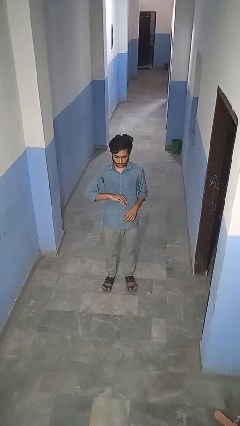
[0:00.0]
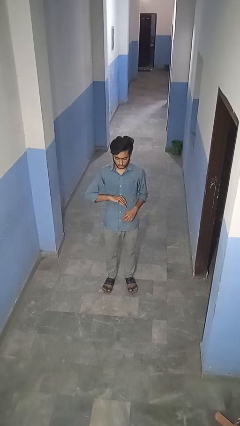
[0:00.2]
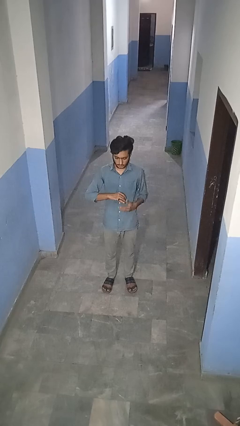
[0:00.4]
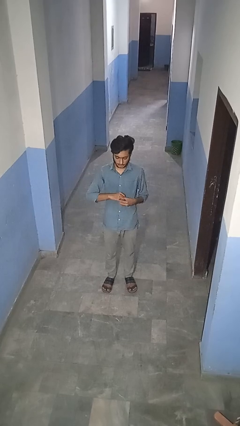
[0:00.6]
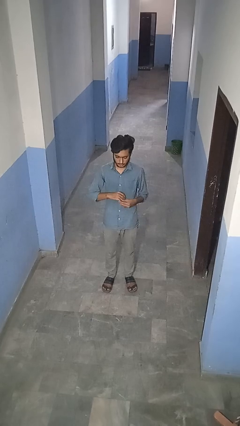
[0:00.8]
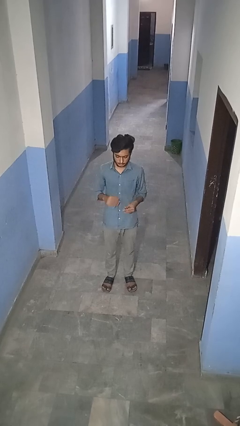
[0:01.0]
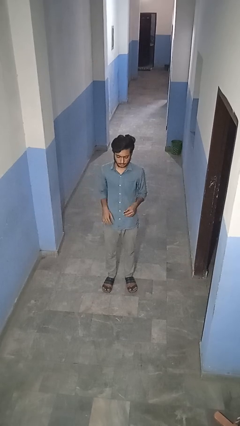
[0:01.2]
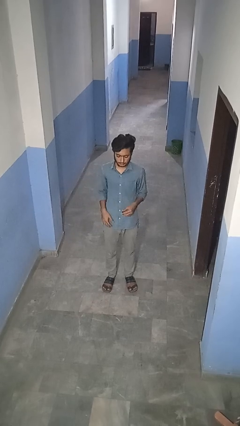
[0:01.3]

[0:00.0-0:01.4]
person takes off ring

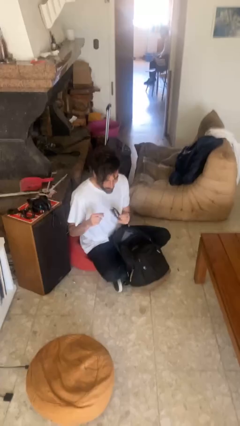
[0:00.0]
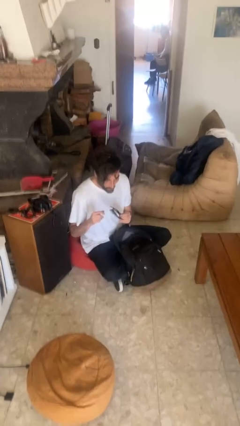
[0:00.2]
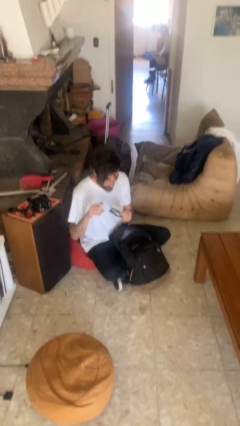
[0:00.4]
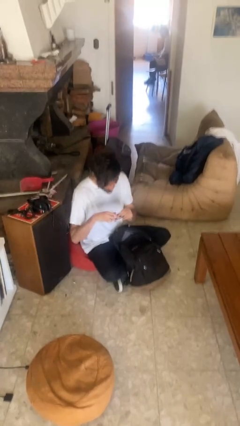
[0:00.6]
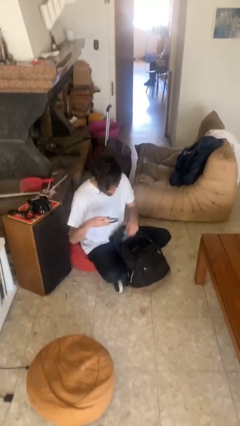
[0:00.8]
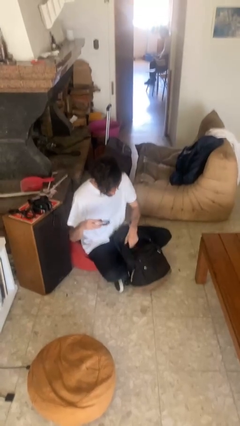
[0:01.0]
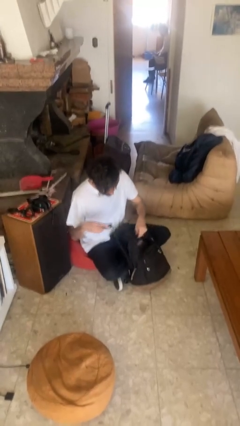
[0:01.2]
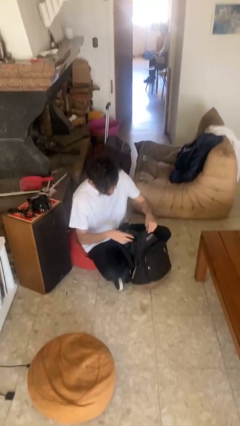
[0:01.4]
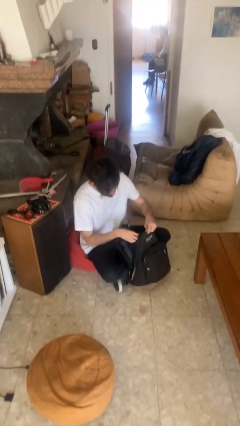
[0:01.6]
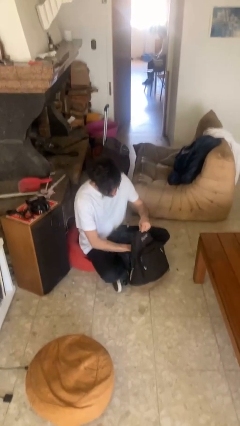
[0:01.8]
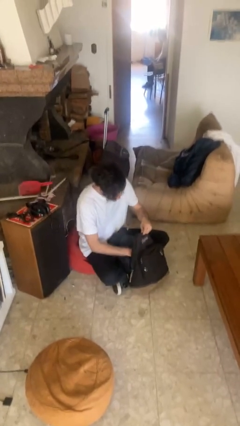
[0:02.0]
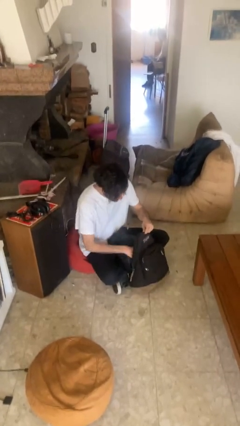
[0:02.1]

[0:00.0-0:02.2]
person puts object into backpack

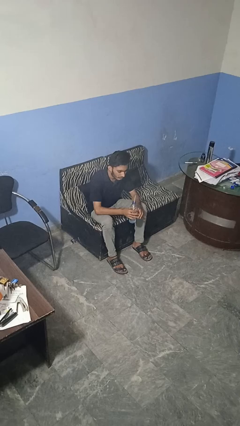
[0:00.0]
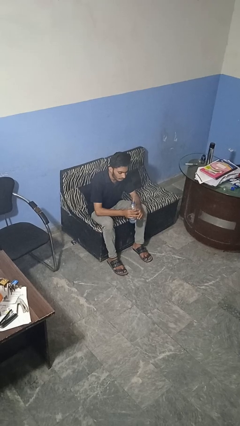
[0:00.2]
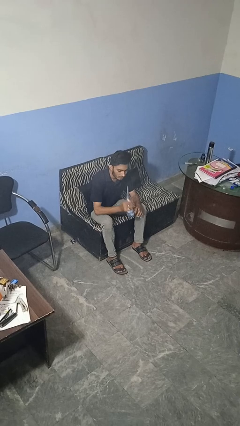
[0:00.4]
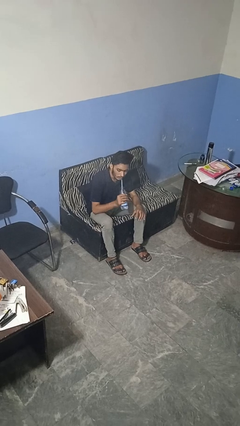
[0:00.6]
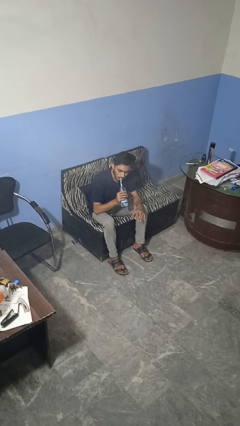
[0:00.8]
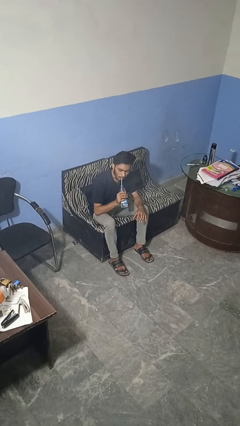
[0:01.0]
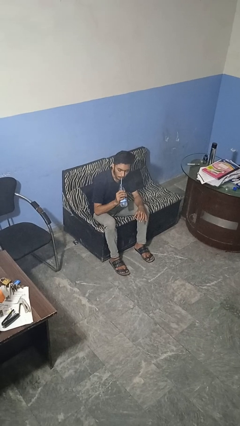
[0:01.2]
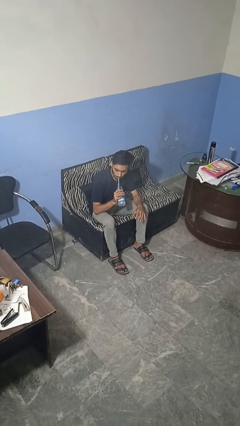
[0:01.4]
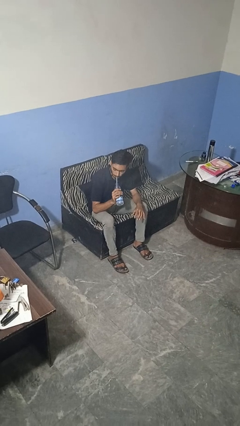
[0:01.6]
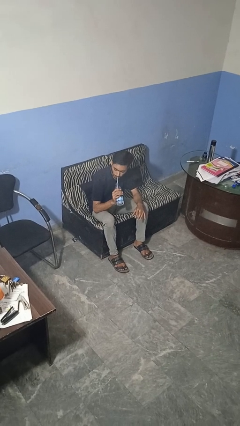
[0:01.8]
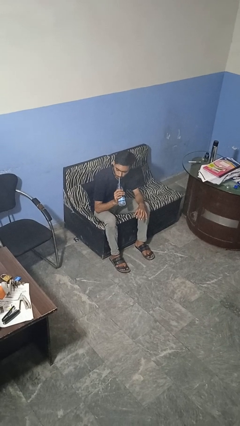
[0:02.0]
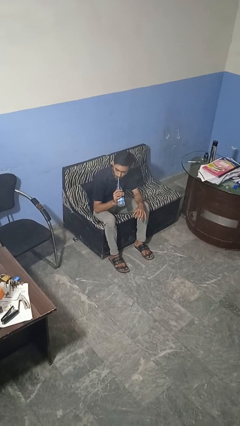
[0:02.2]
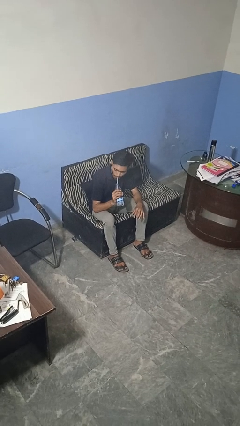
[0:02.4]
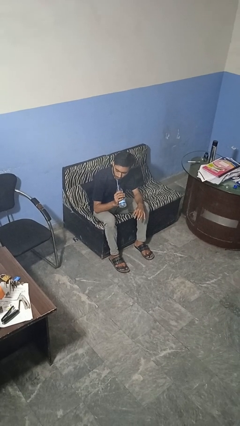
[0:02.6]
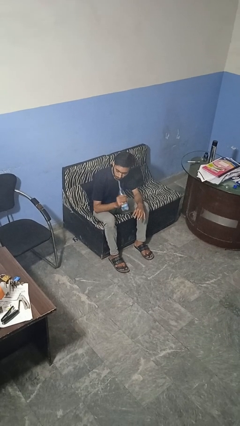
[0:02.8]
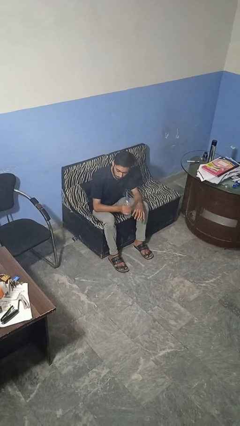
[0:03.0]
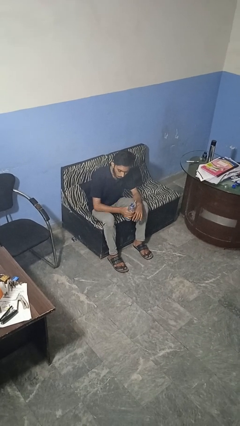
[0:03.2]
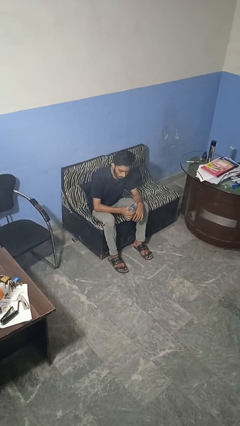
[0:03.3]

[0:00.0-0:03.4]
person drinks from straw

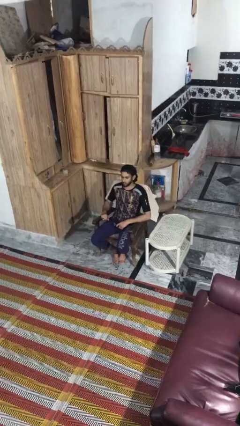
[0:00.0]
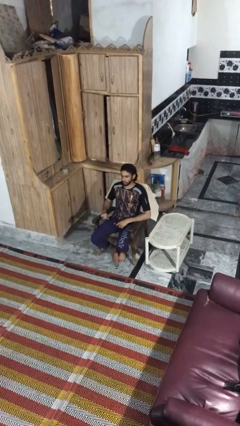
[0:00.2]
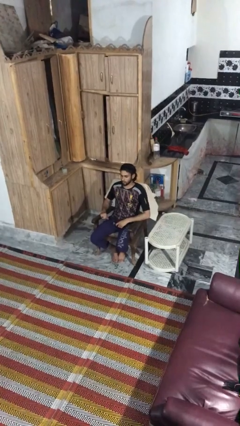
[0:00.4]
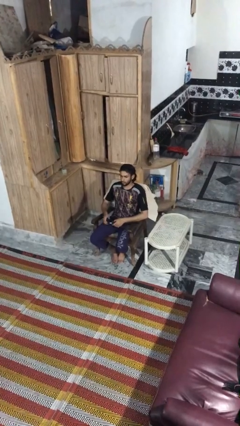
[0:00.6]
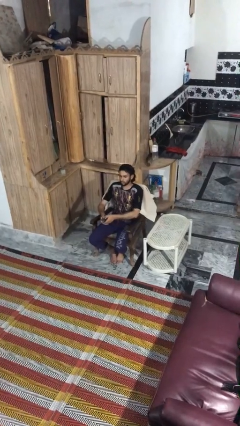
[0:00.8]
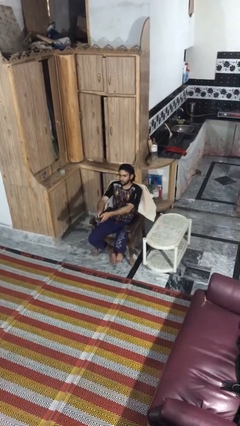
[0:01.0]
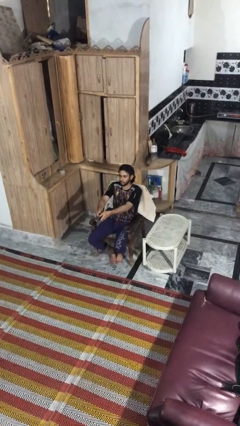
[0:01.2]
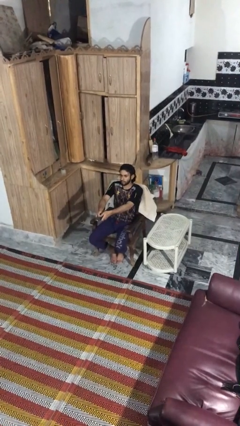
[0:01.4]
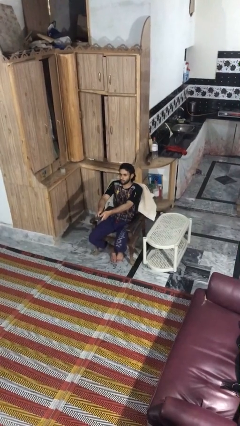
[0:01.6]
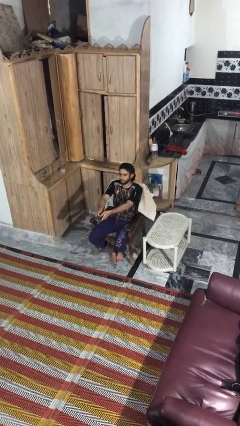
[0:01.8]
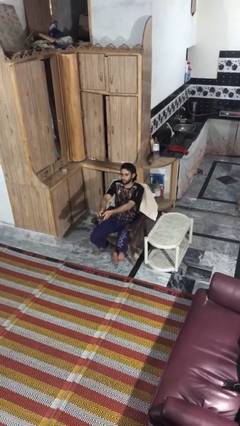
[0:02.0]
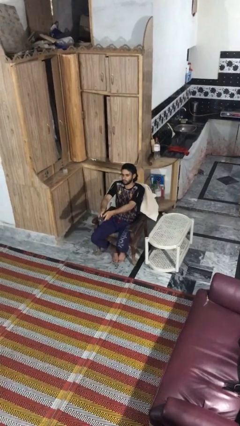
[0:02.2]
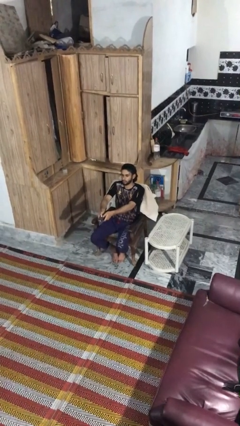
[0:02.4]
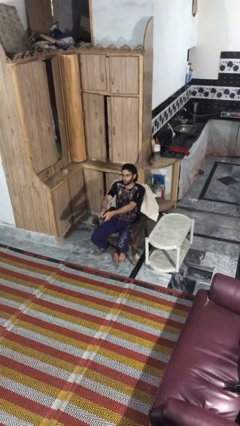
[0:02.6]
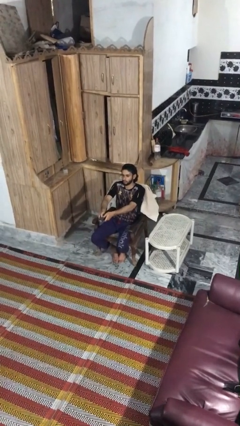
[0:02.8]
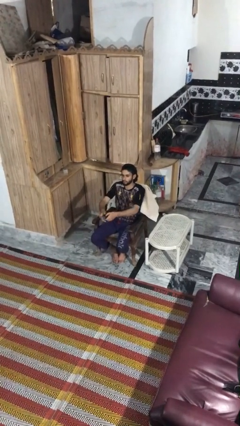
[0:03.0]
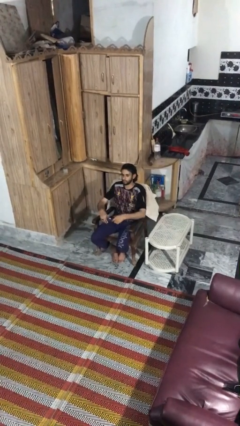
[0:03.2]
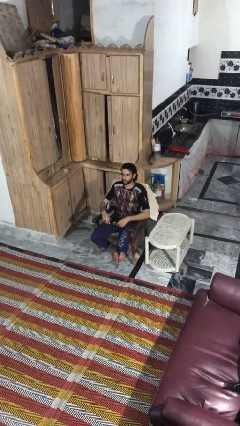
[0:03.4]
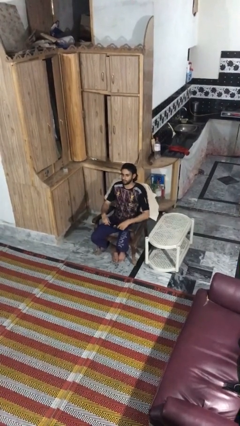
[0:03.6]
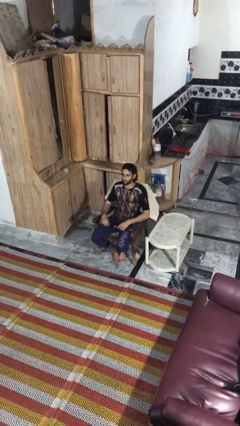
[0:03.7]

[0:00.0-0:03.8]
person uses television remote

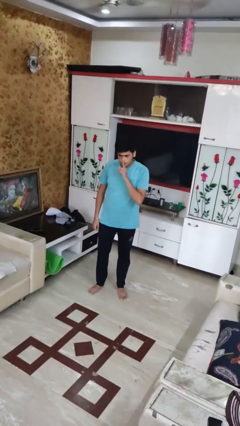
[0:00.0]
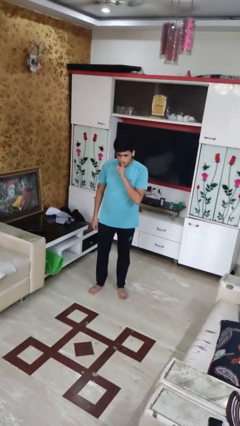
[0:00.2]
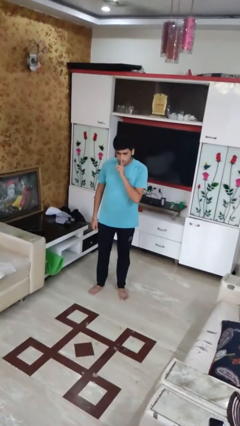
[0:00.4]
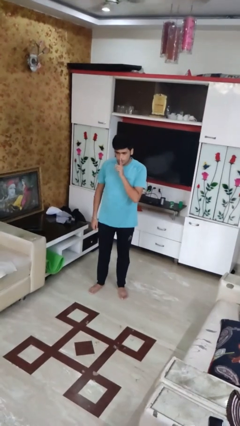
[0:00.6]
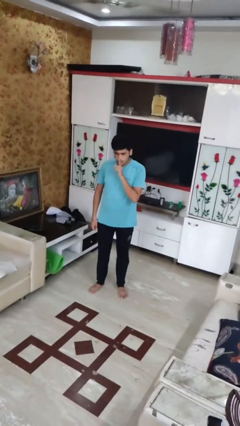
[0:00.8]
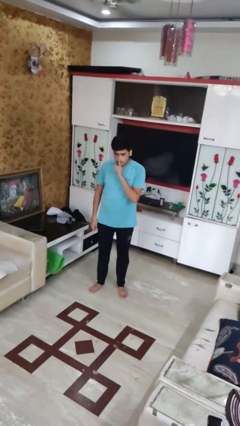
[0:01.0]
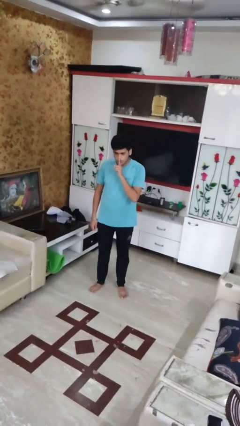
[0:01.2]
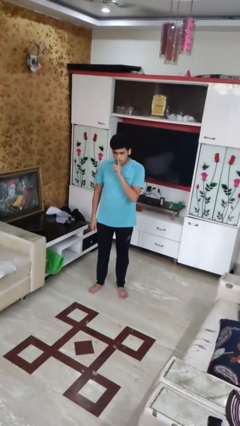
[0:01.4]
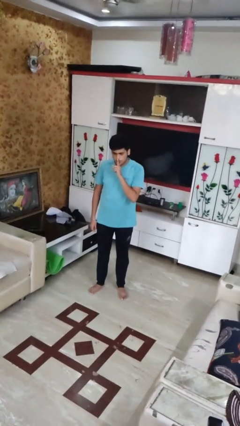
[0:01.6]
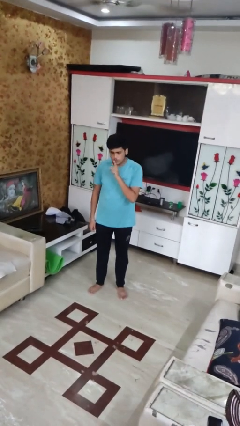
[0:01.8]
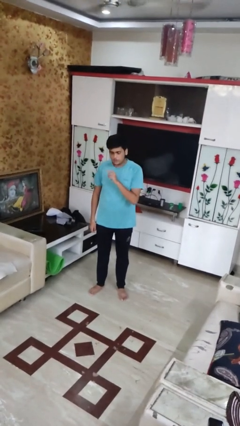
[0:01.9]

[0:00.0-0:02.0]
person gestures be quiet

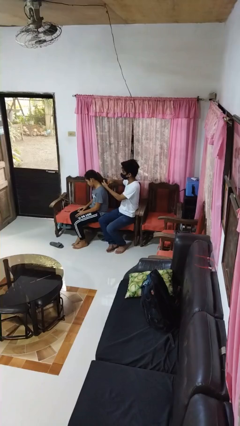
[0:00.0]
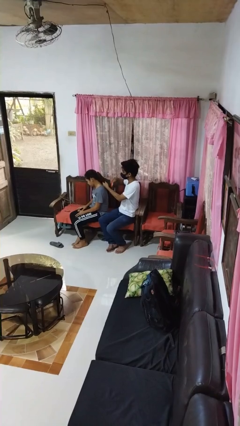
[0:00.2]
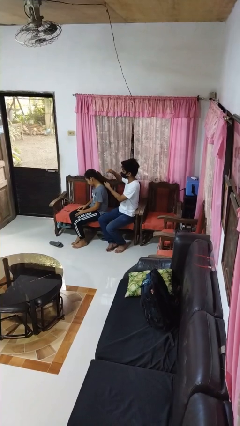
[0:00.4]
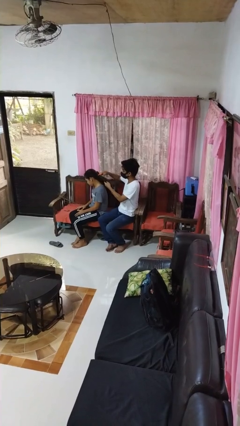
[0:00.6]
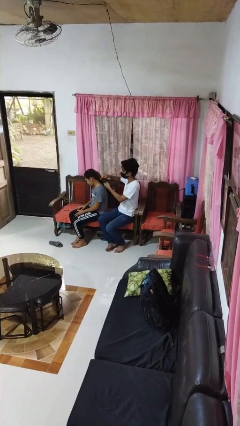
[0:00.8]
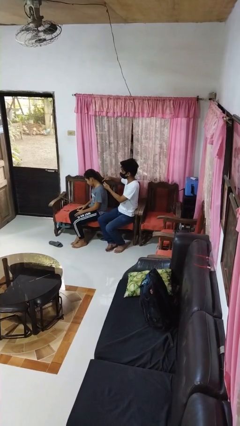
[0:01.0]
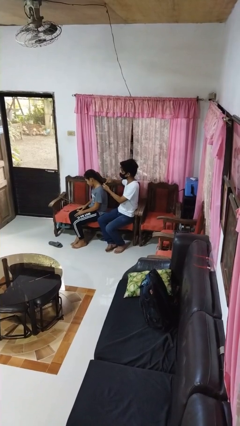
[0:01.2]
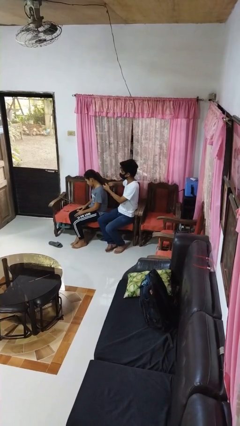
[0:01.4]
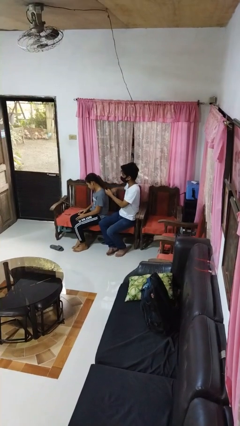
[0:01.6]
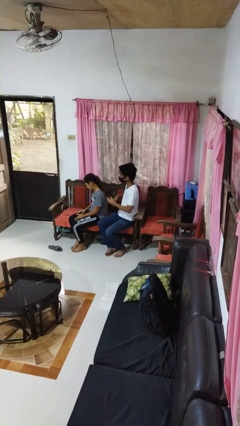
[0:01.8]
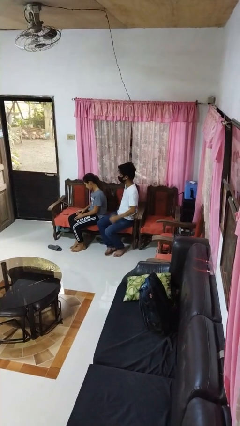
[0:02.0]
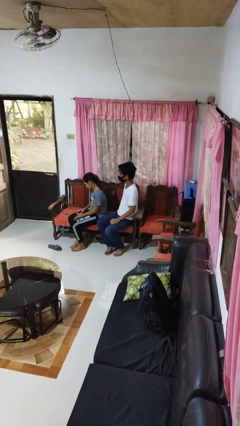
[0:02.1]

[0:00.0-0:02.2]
person brushes hair of person

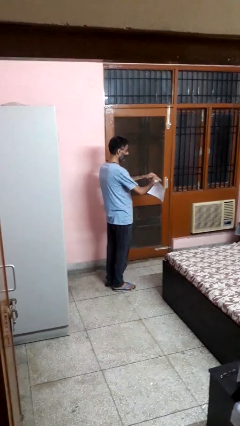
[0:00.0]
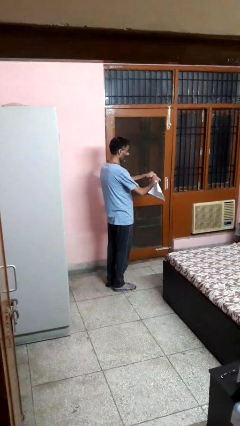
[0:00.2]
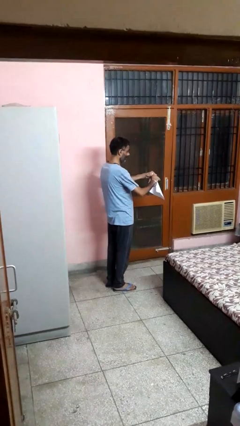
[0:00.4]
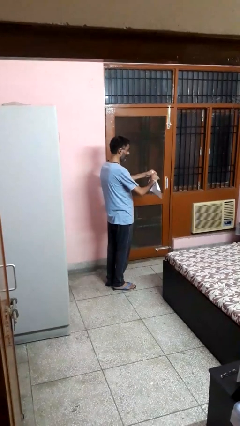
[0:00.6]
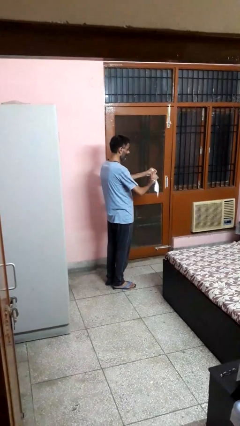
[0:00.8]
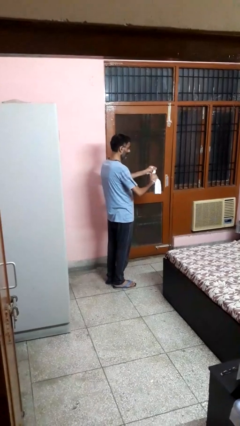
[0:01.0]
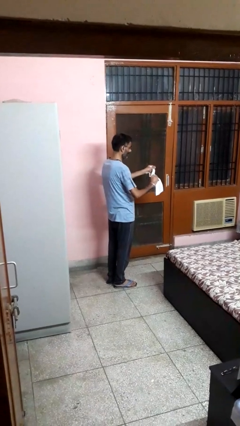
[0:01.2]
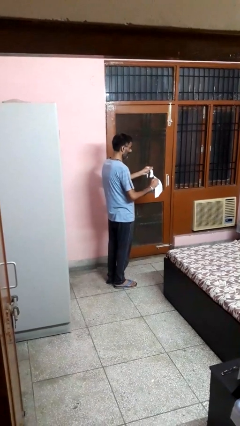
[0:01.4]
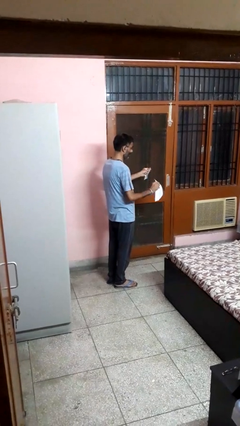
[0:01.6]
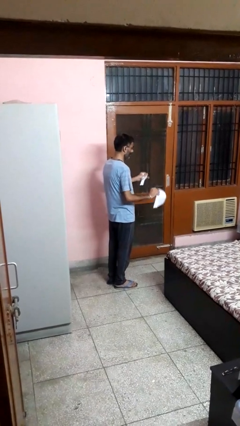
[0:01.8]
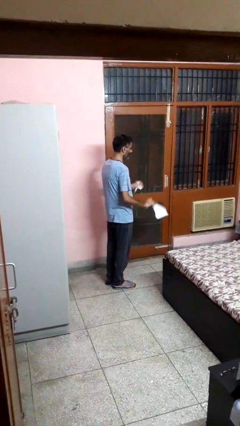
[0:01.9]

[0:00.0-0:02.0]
person tears paper
